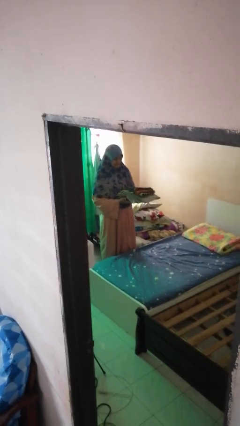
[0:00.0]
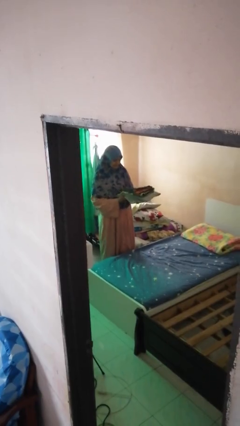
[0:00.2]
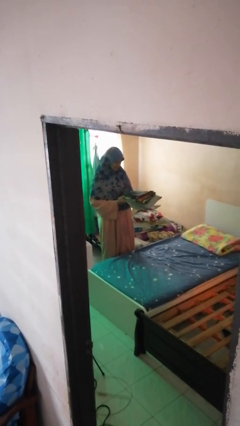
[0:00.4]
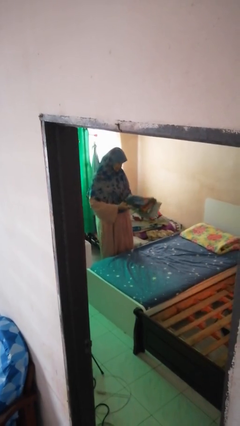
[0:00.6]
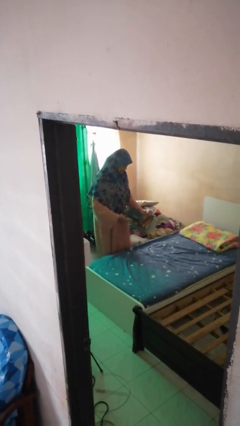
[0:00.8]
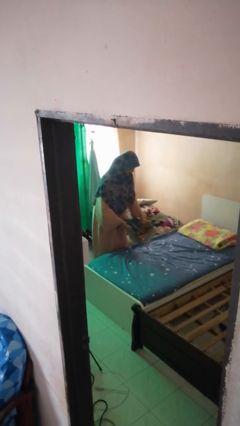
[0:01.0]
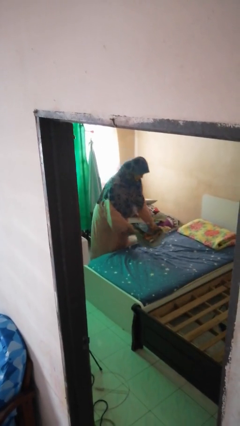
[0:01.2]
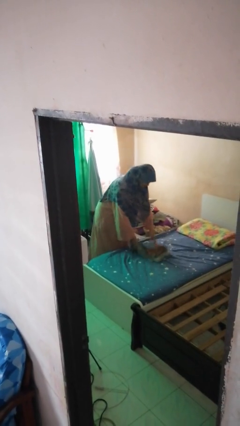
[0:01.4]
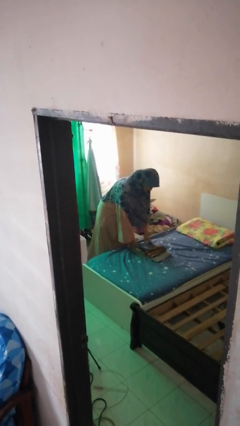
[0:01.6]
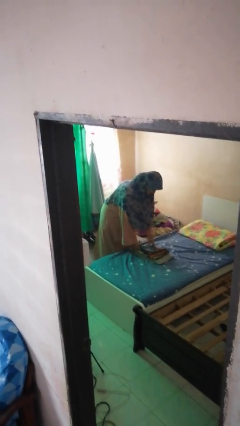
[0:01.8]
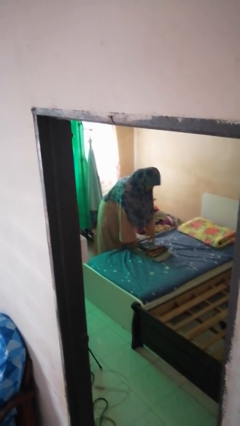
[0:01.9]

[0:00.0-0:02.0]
person puts down object on bed

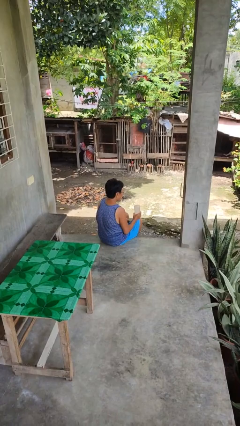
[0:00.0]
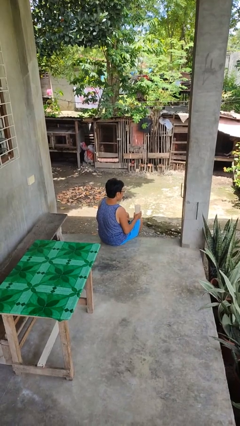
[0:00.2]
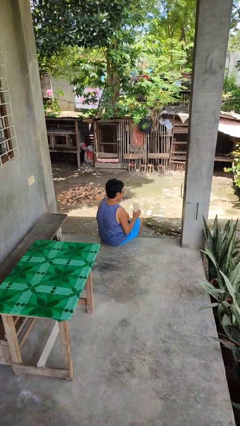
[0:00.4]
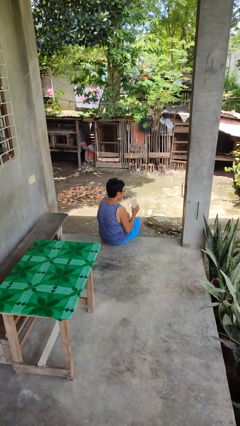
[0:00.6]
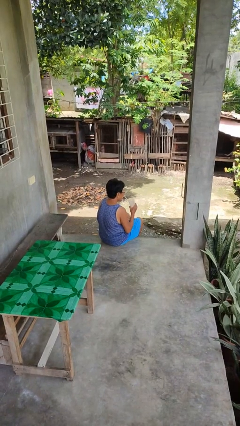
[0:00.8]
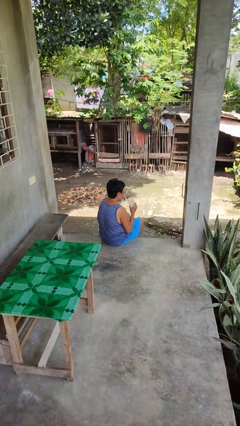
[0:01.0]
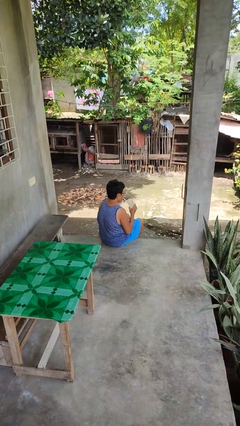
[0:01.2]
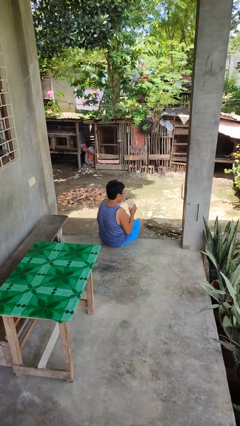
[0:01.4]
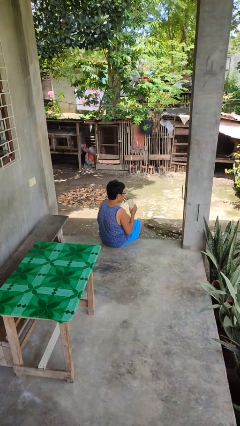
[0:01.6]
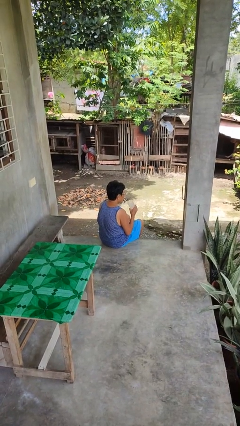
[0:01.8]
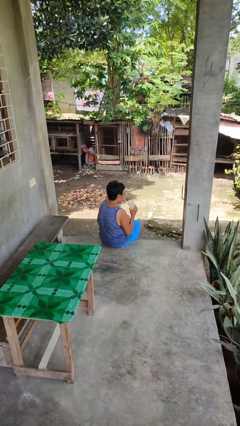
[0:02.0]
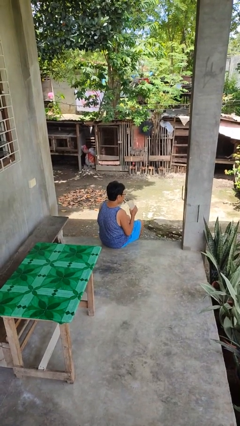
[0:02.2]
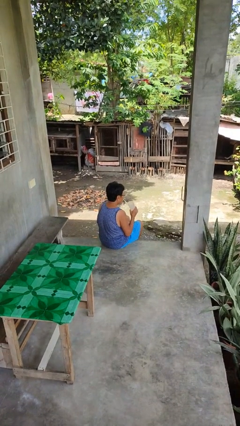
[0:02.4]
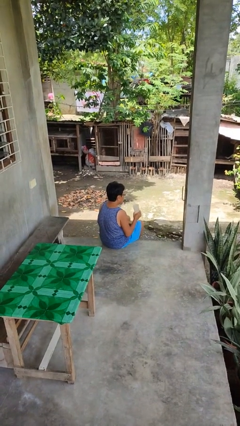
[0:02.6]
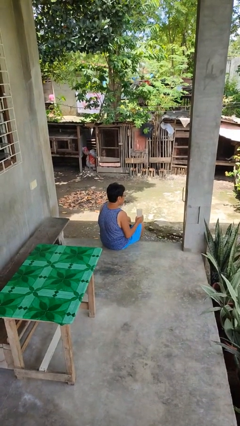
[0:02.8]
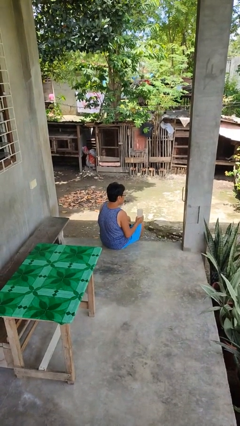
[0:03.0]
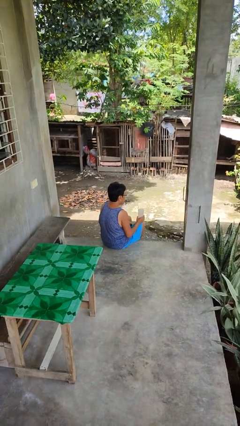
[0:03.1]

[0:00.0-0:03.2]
person drinks from straw

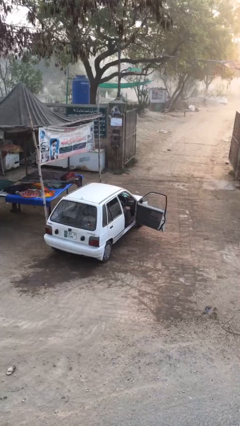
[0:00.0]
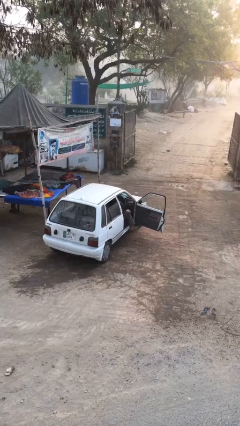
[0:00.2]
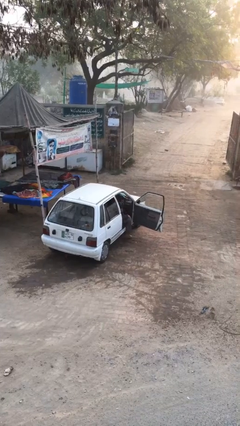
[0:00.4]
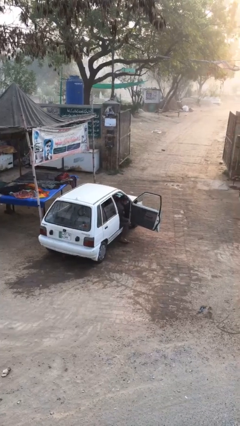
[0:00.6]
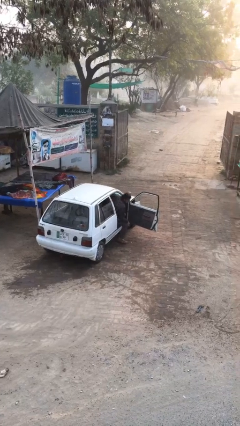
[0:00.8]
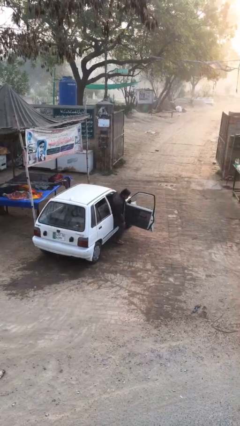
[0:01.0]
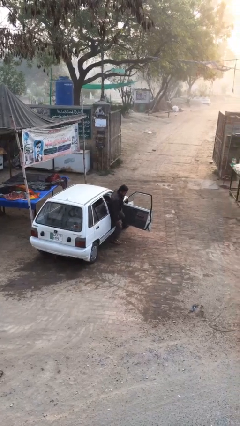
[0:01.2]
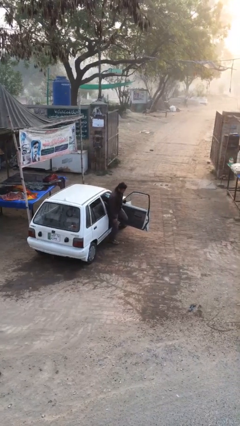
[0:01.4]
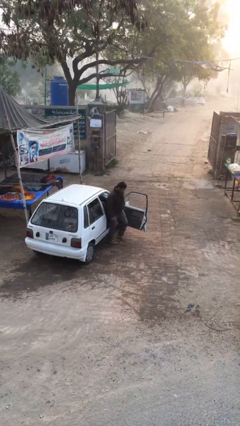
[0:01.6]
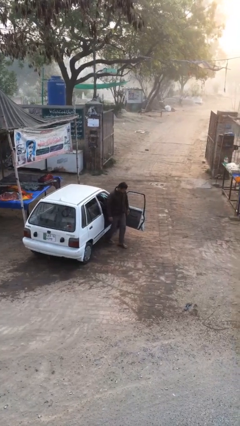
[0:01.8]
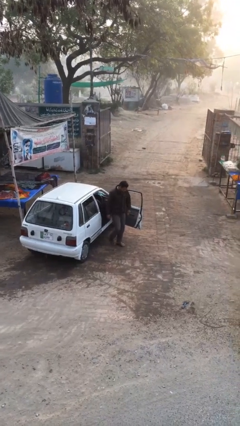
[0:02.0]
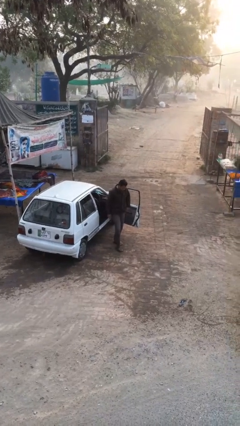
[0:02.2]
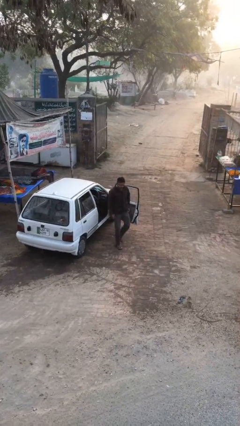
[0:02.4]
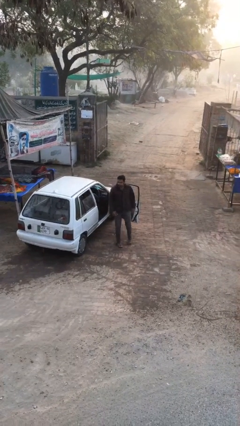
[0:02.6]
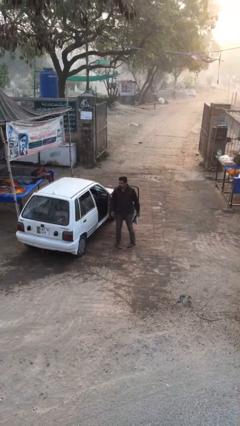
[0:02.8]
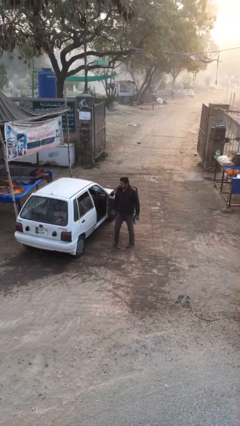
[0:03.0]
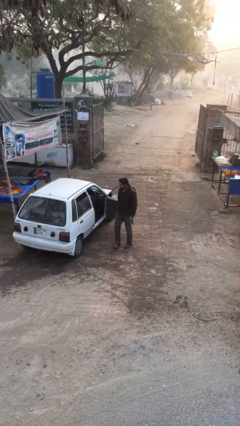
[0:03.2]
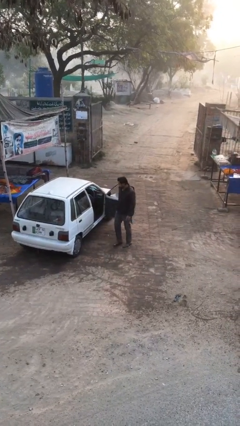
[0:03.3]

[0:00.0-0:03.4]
person exits car

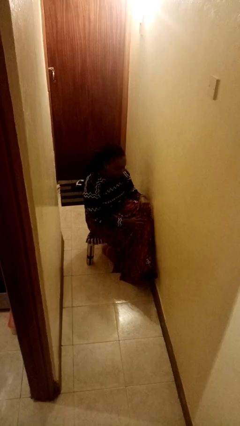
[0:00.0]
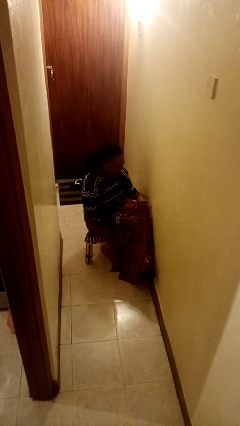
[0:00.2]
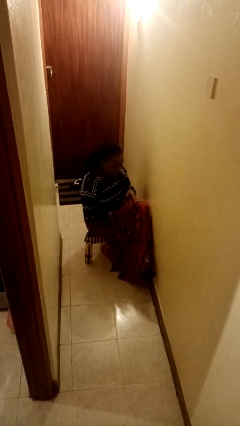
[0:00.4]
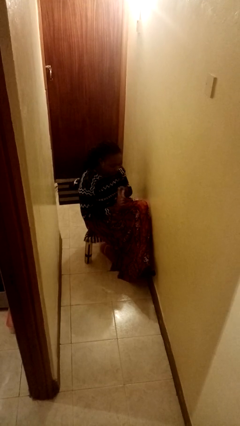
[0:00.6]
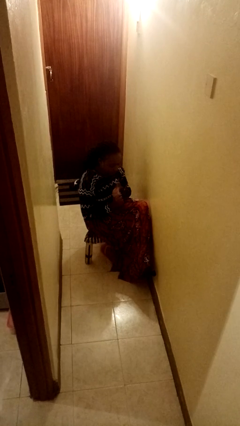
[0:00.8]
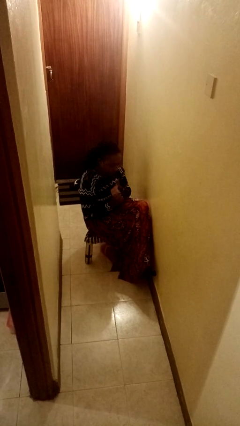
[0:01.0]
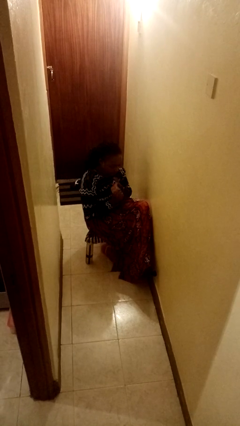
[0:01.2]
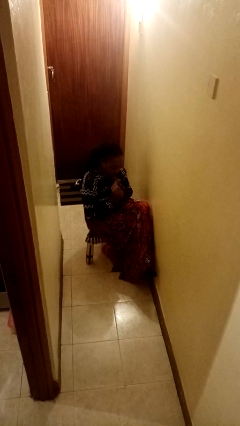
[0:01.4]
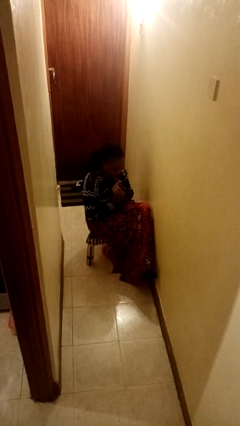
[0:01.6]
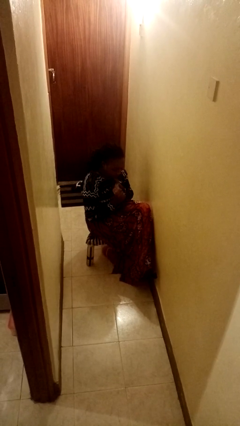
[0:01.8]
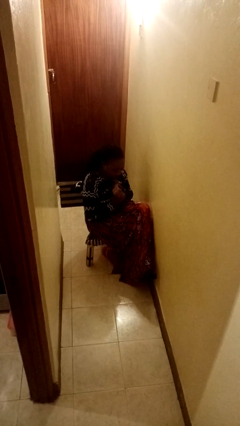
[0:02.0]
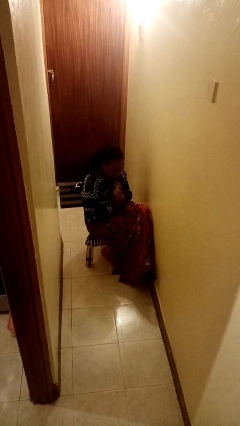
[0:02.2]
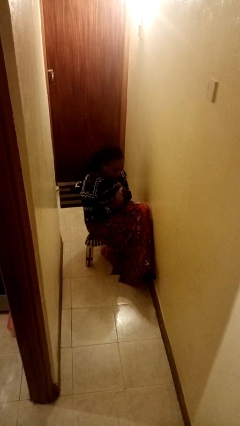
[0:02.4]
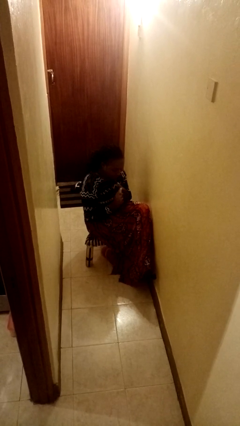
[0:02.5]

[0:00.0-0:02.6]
person cracks knuckles

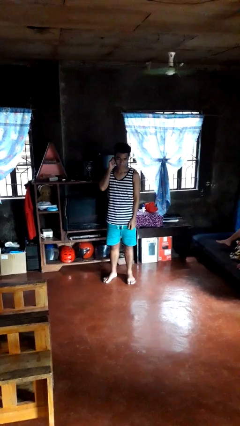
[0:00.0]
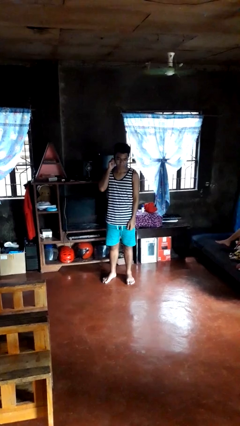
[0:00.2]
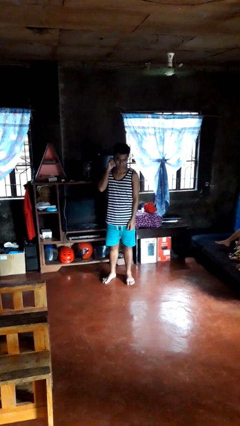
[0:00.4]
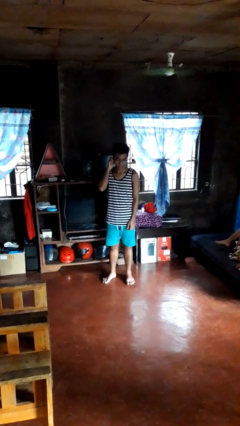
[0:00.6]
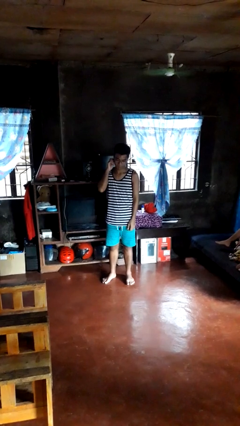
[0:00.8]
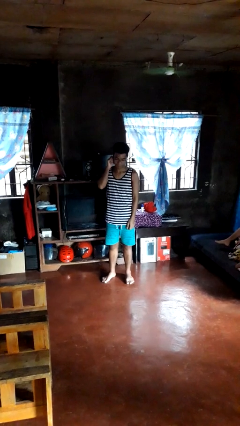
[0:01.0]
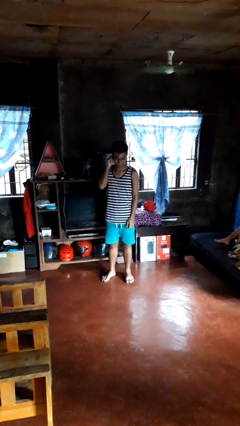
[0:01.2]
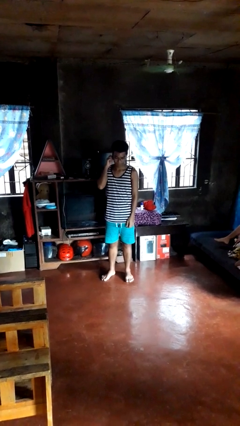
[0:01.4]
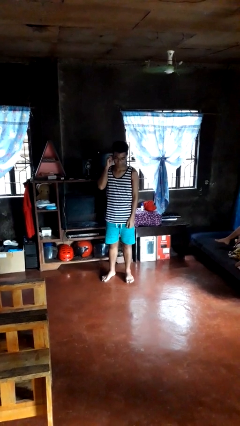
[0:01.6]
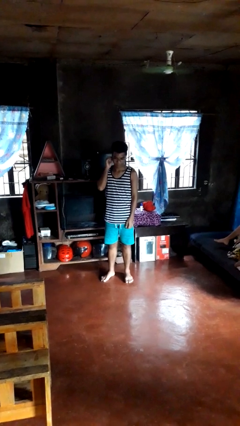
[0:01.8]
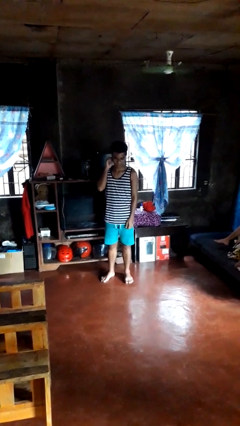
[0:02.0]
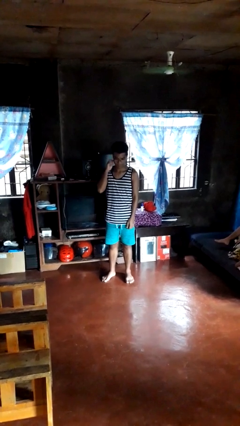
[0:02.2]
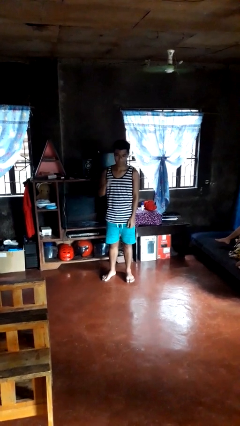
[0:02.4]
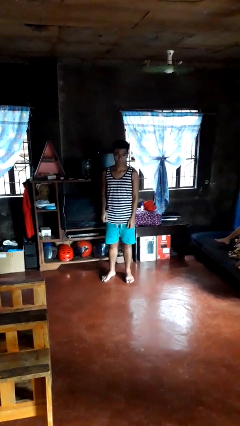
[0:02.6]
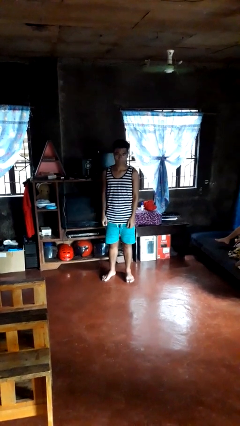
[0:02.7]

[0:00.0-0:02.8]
person touches earlobe

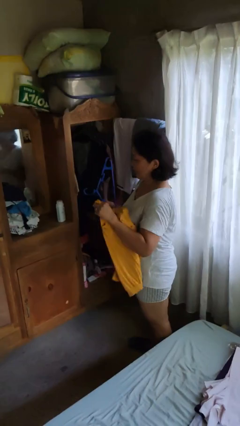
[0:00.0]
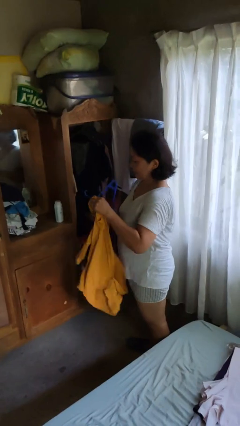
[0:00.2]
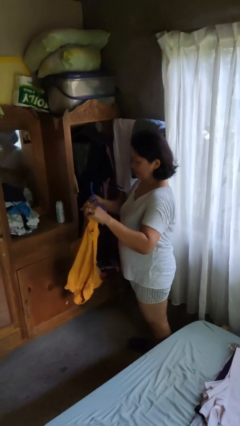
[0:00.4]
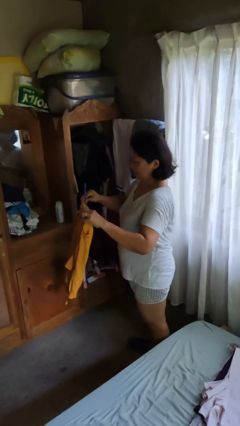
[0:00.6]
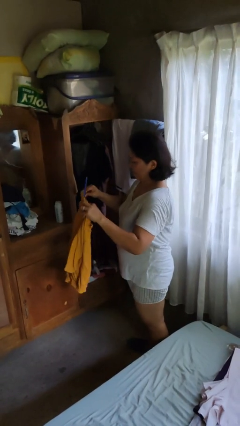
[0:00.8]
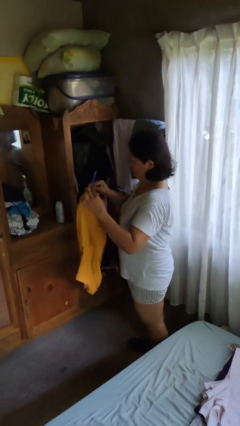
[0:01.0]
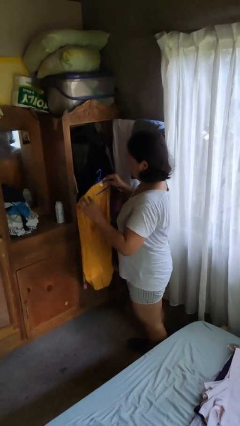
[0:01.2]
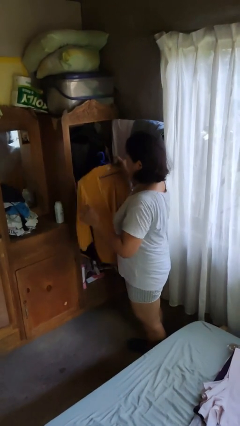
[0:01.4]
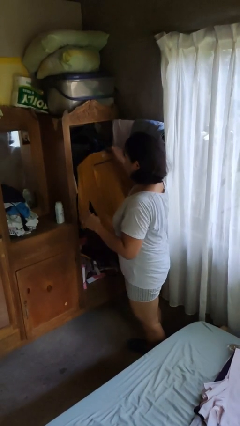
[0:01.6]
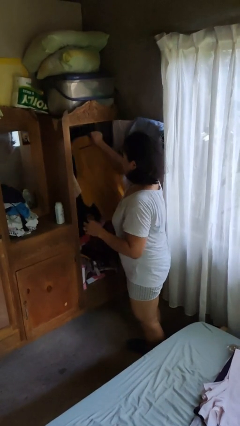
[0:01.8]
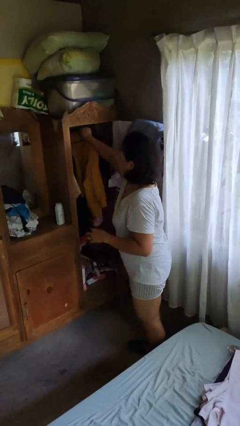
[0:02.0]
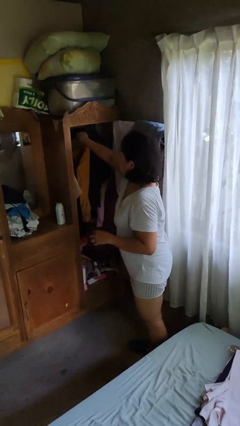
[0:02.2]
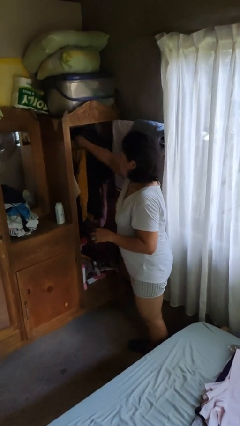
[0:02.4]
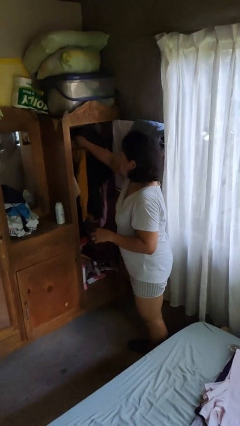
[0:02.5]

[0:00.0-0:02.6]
person puts clothes into closet

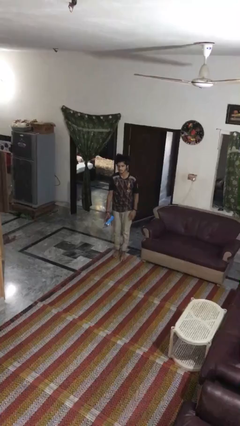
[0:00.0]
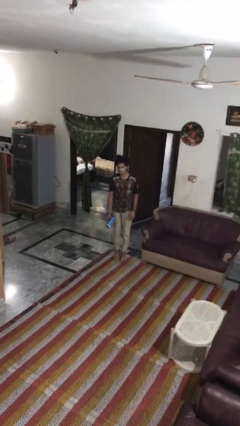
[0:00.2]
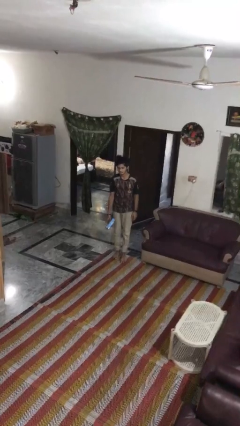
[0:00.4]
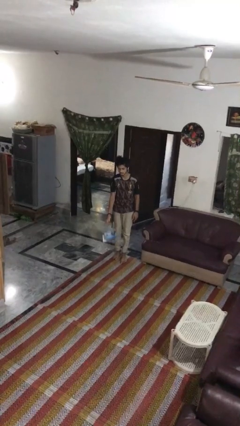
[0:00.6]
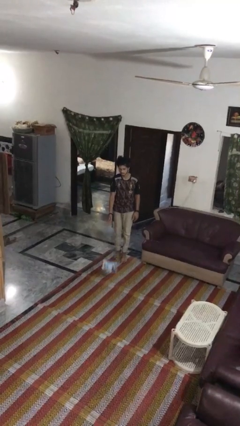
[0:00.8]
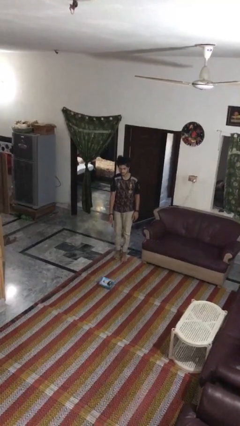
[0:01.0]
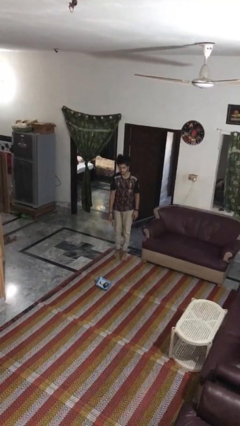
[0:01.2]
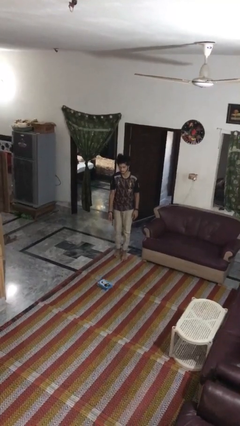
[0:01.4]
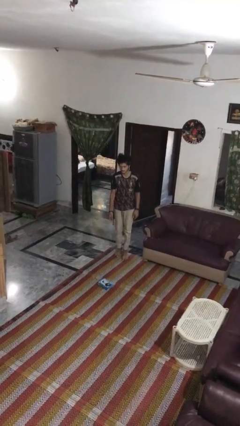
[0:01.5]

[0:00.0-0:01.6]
person throws object to ground
